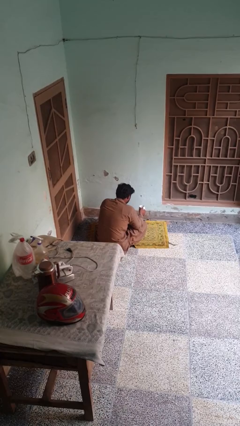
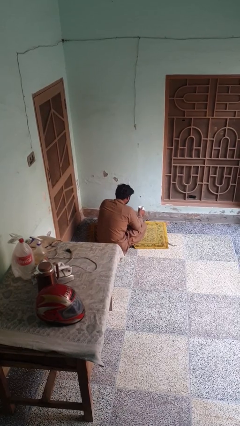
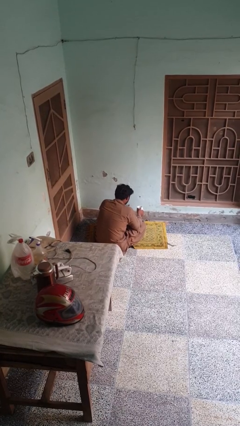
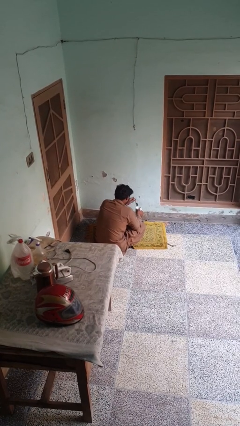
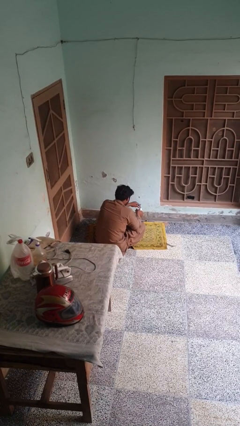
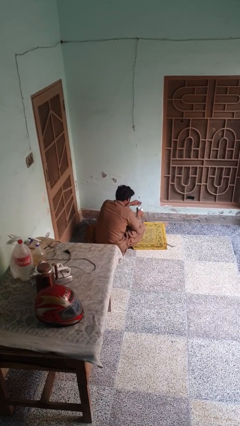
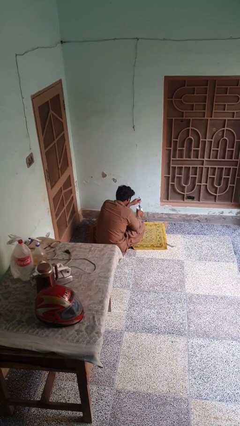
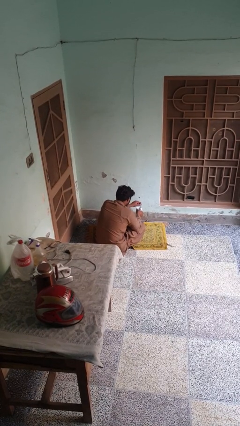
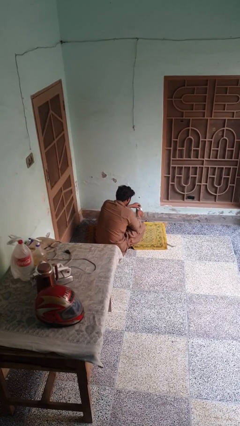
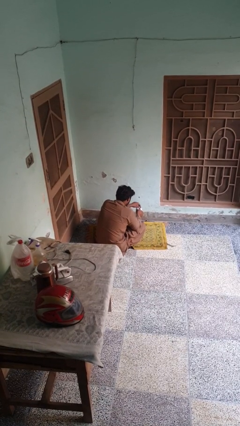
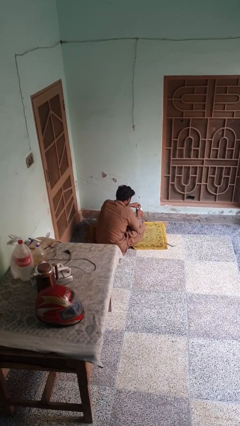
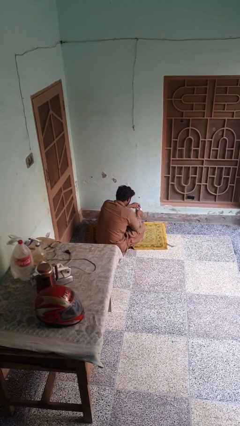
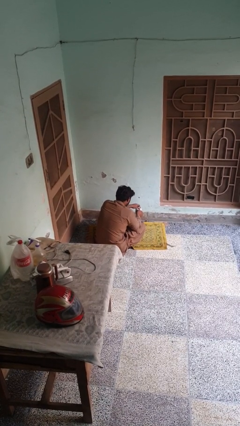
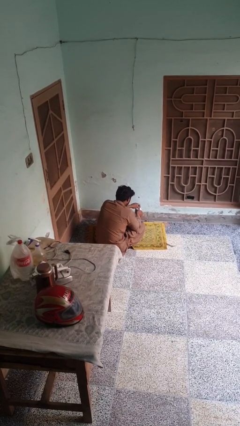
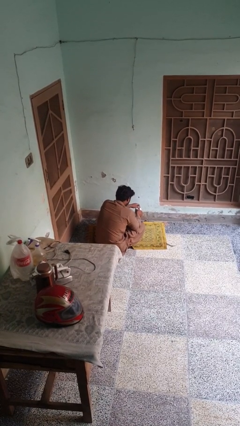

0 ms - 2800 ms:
person stirs mug

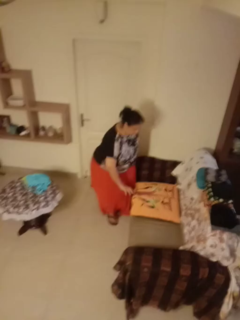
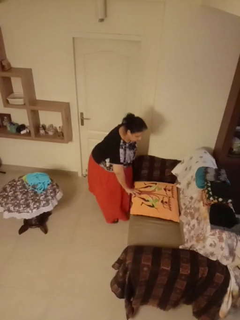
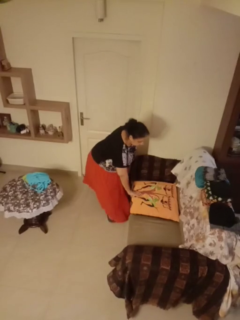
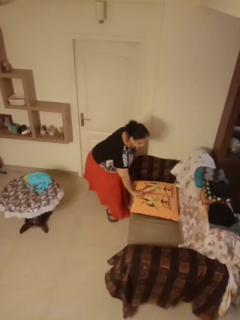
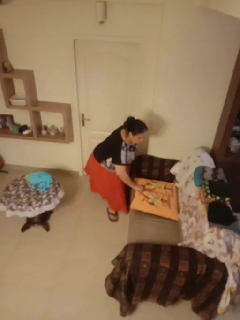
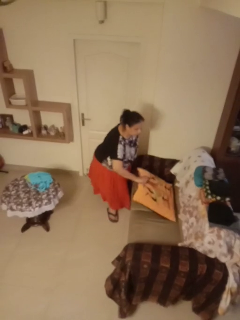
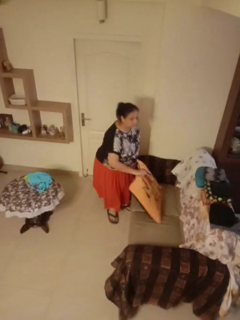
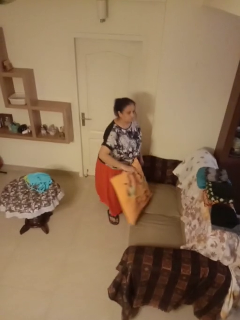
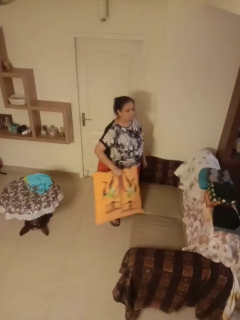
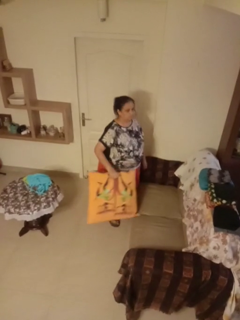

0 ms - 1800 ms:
person picks up object from couch

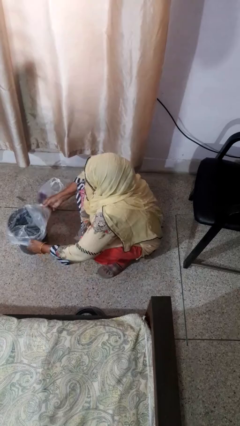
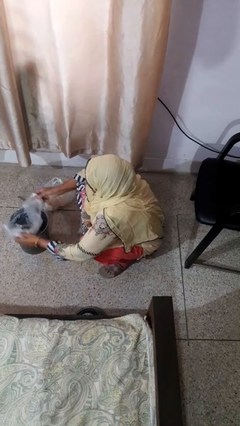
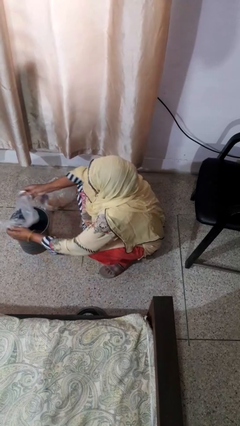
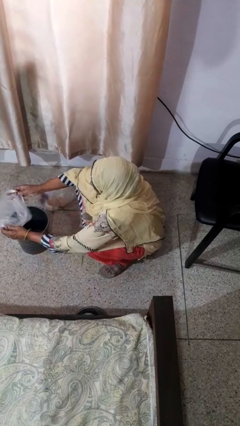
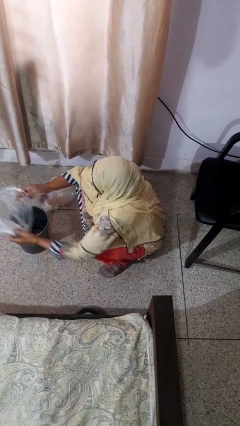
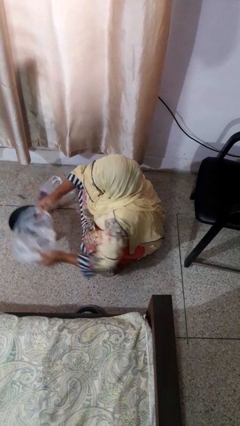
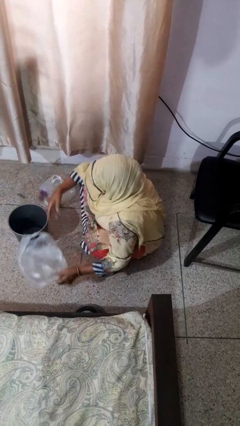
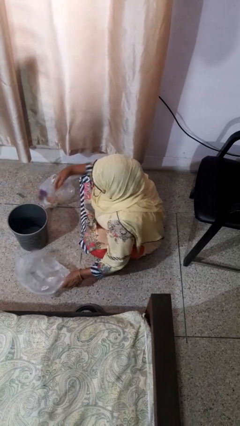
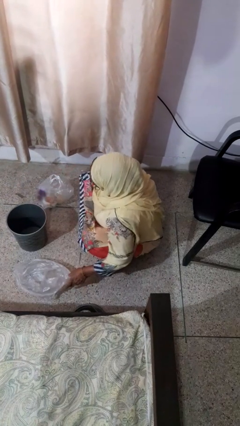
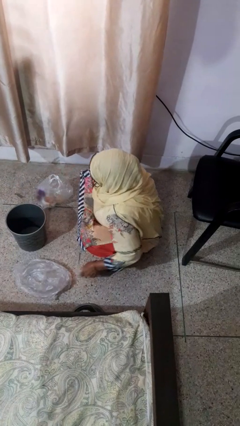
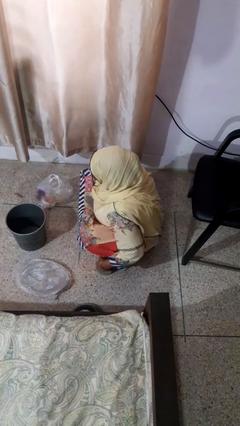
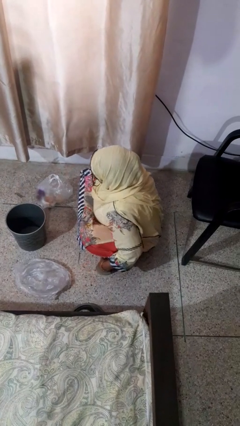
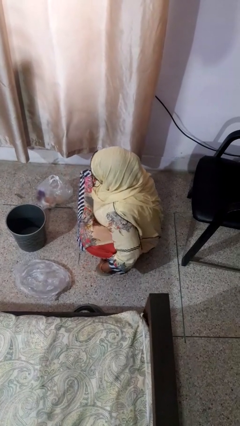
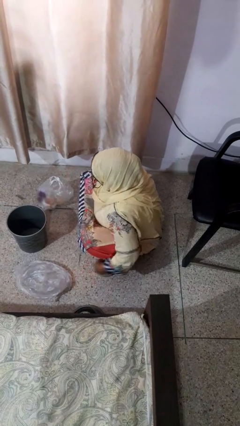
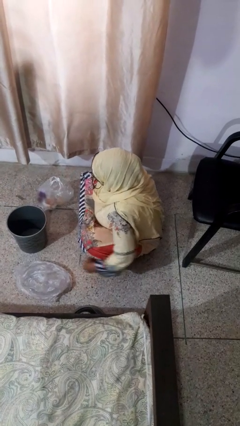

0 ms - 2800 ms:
person removes trashbag from trashcan

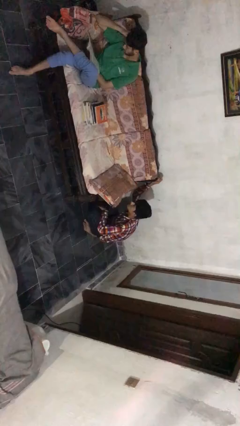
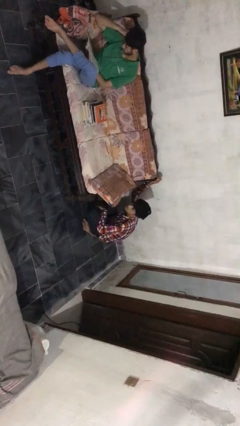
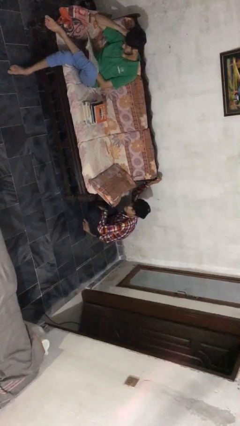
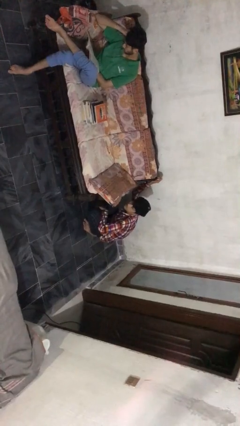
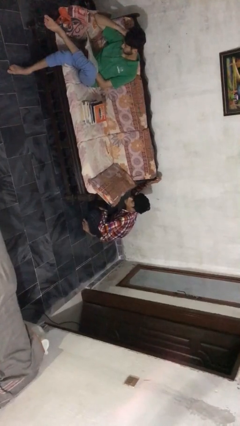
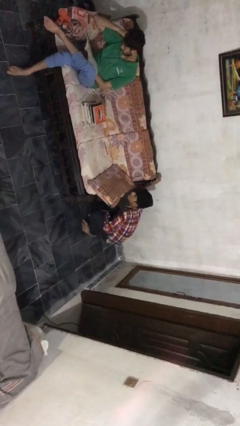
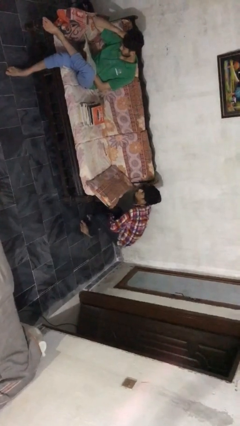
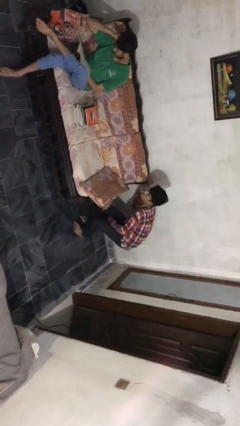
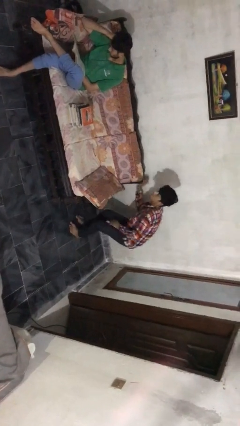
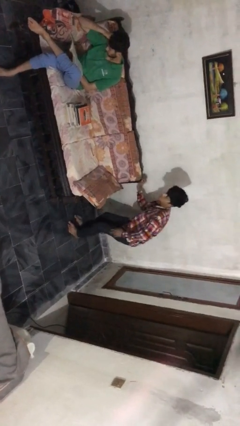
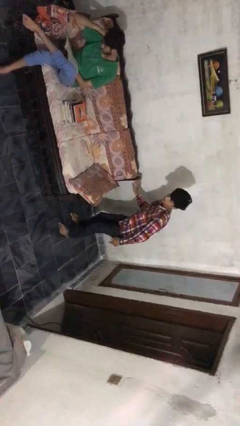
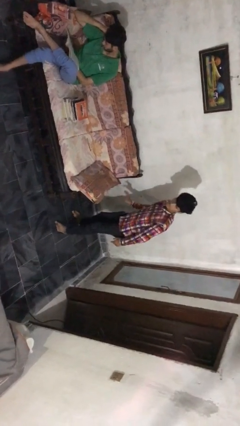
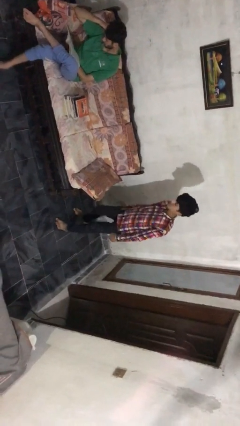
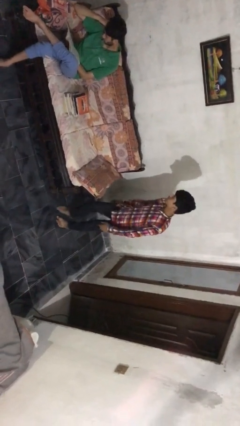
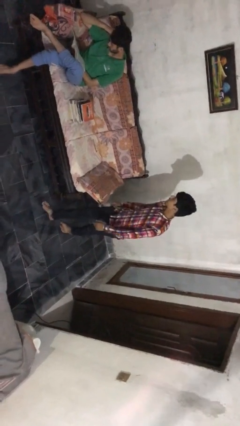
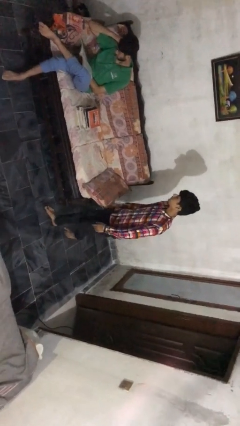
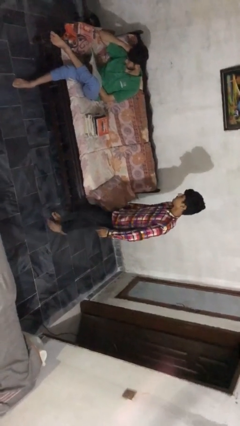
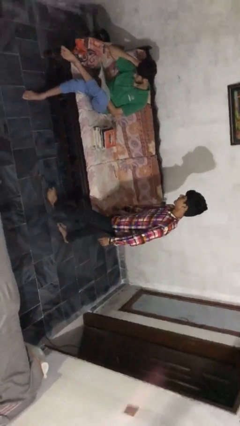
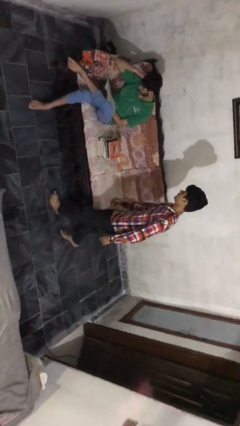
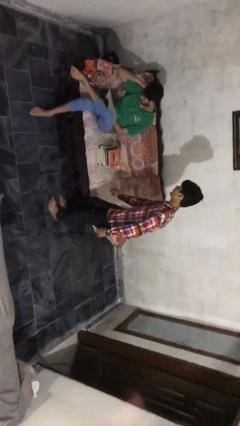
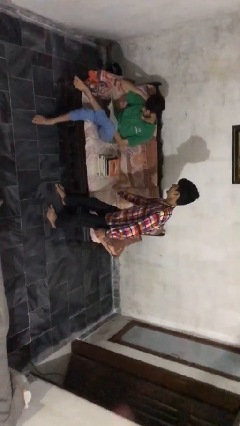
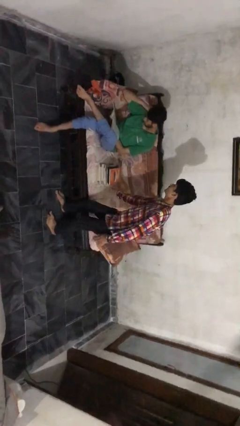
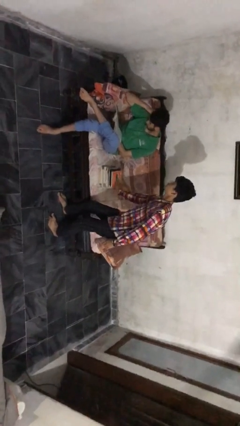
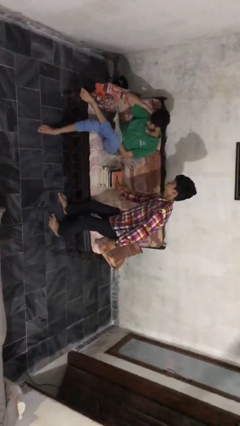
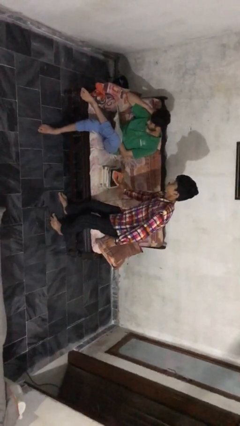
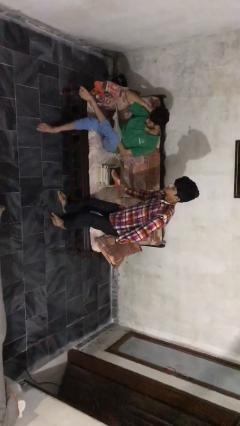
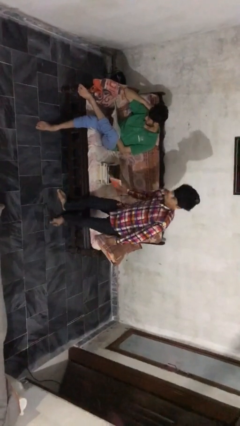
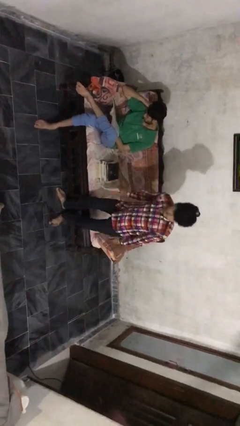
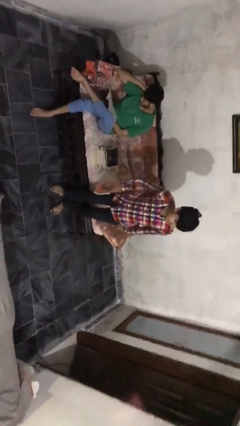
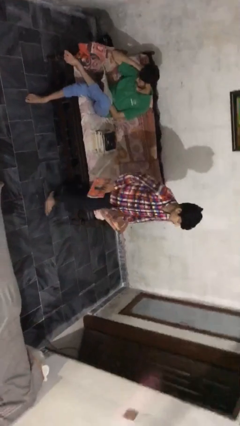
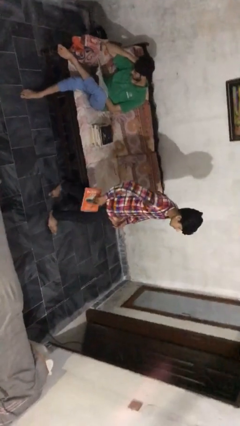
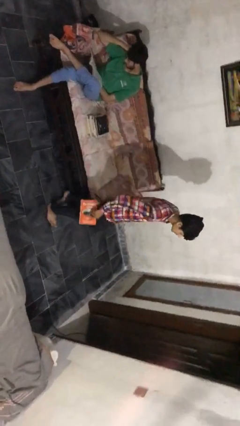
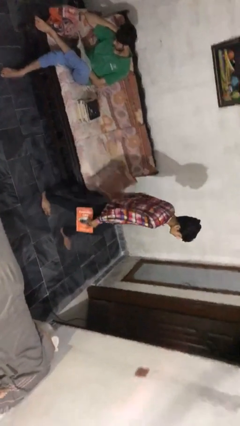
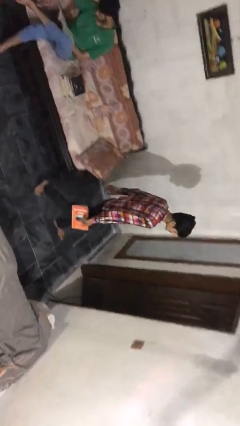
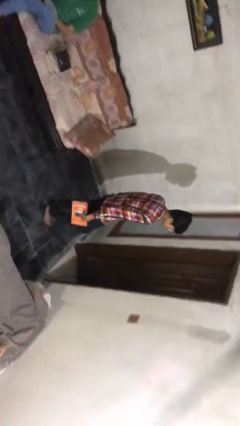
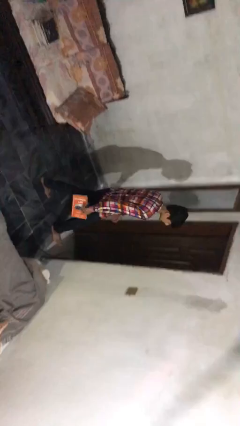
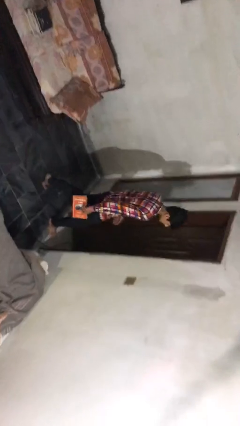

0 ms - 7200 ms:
person steals object from person

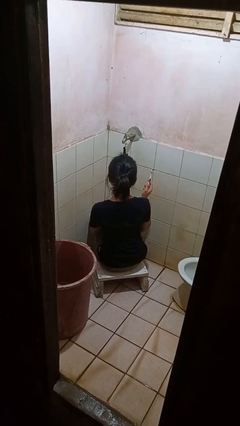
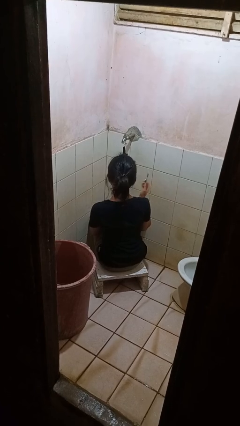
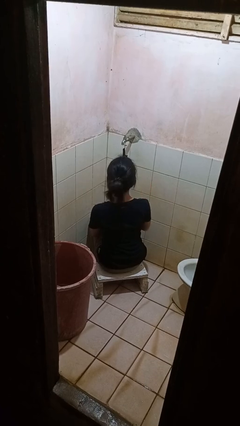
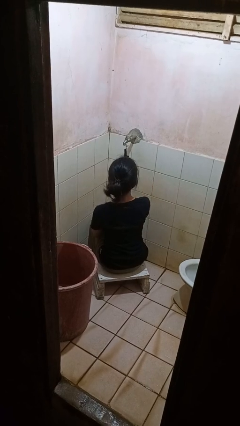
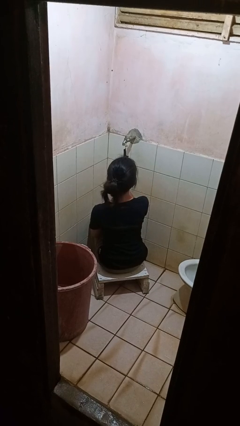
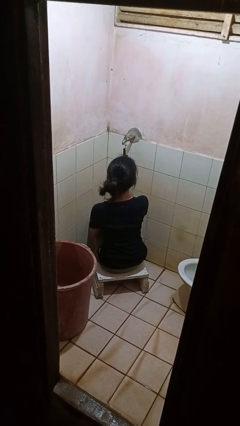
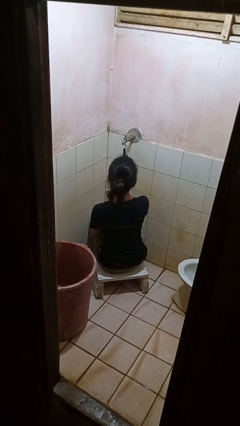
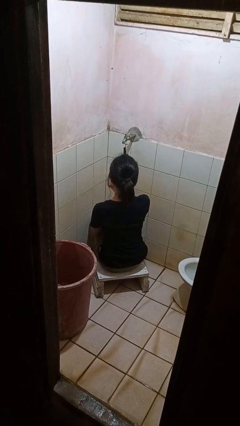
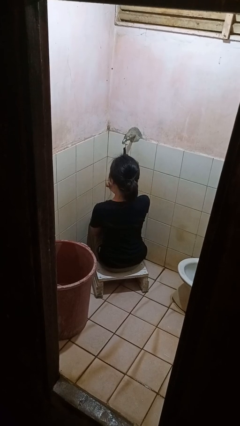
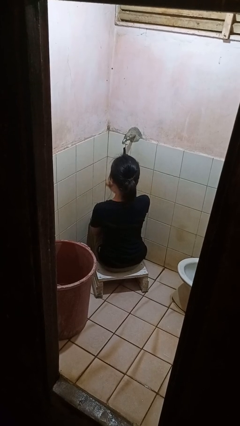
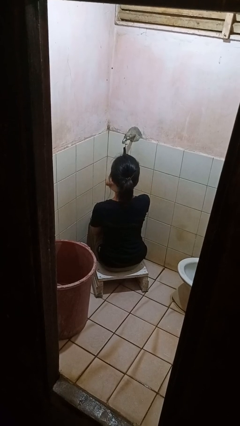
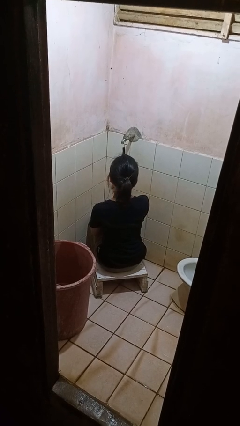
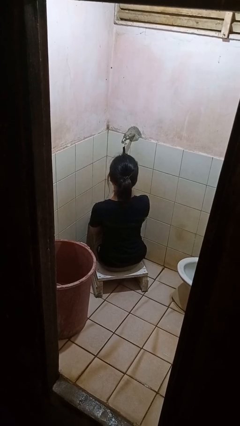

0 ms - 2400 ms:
person brushes teeth

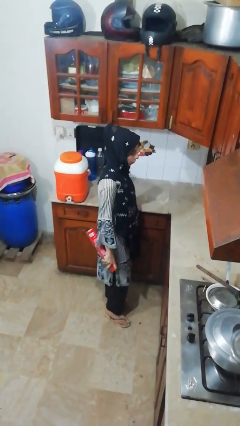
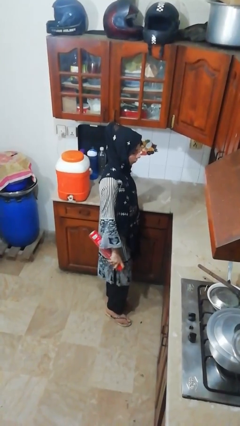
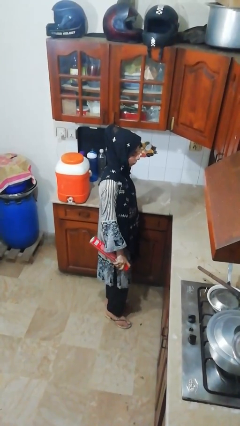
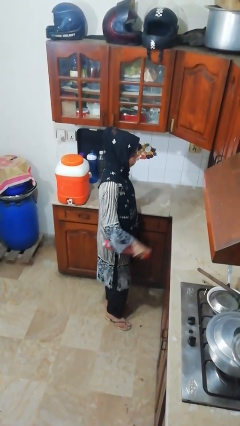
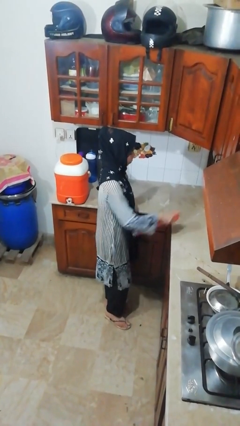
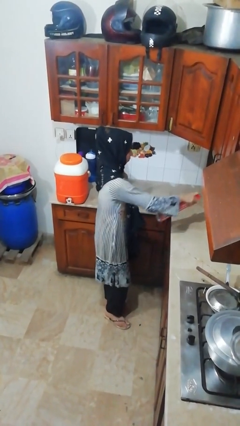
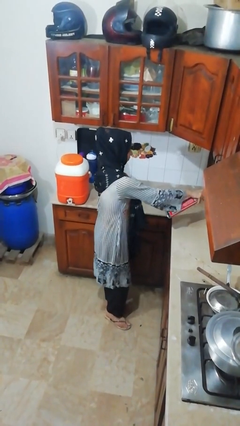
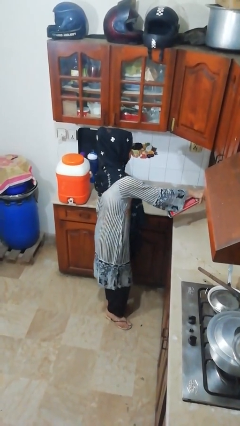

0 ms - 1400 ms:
person sprays from bottle
